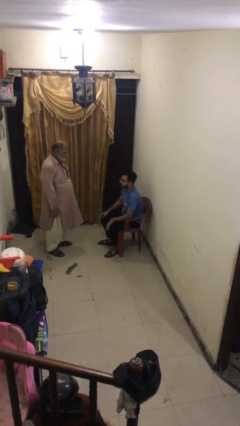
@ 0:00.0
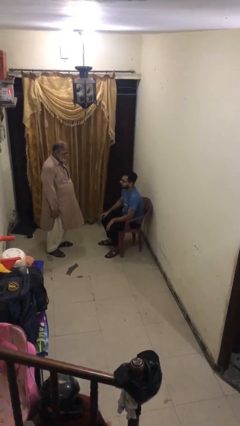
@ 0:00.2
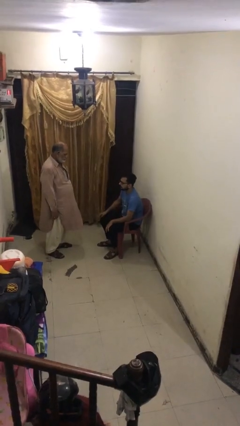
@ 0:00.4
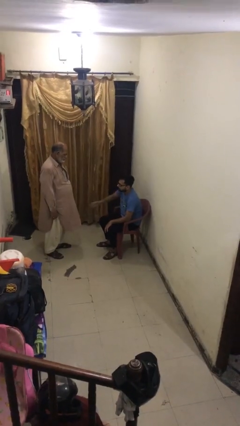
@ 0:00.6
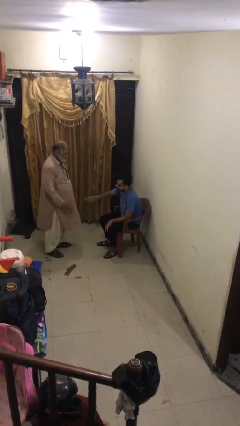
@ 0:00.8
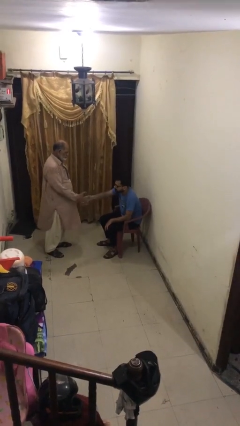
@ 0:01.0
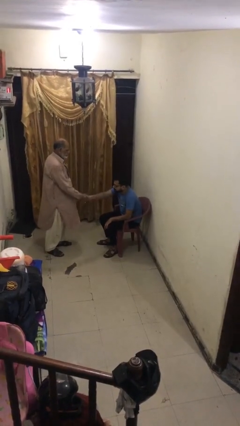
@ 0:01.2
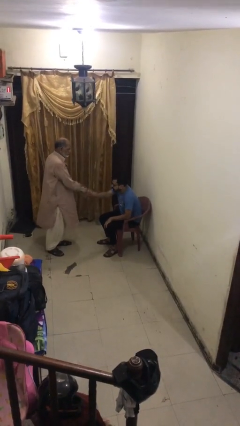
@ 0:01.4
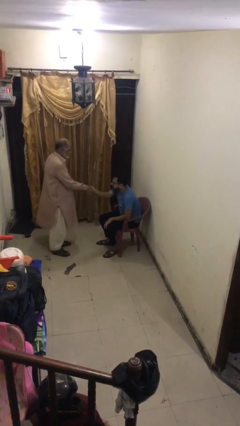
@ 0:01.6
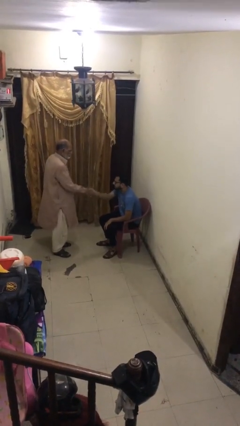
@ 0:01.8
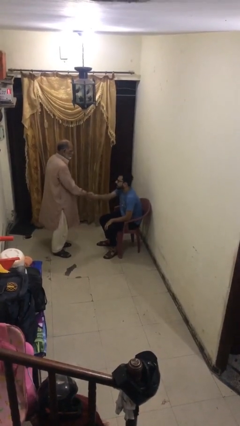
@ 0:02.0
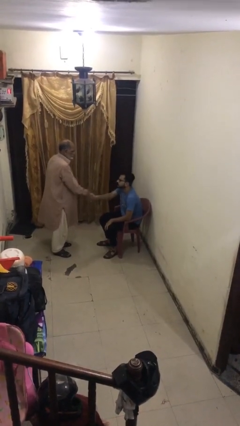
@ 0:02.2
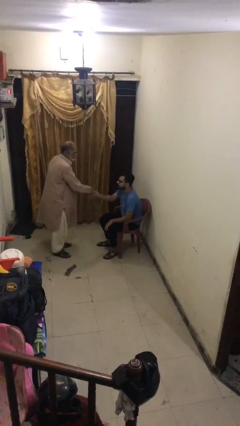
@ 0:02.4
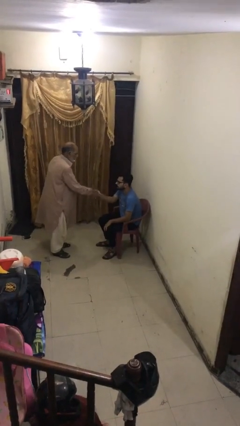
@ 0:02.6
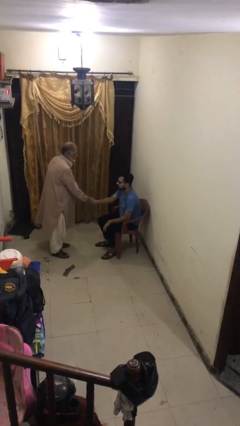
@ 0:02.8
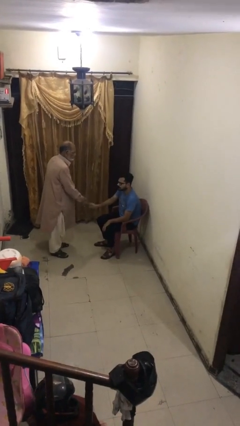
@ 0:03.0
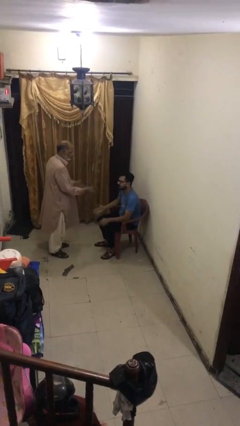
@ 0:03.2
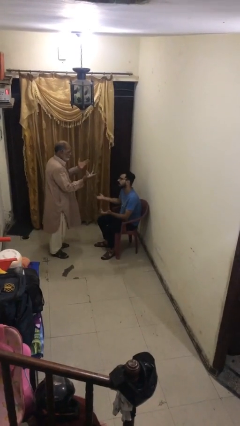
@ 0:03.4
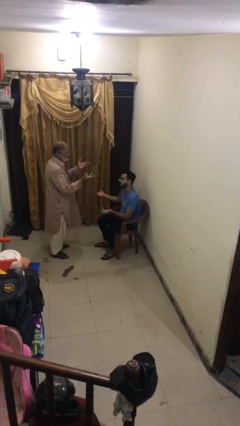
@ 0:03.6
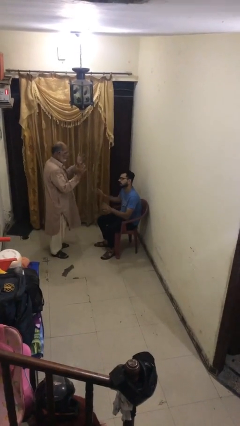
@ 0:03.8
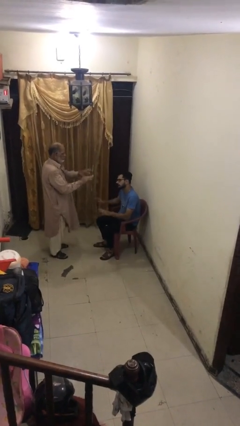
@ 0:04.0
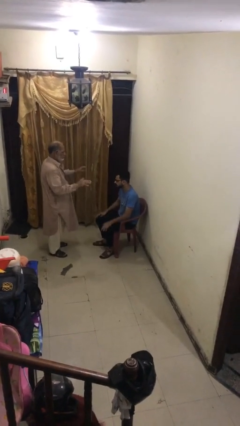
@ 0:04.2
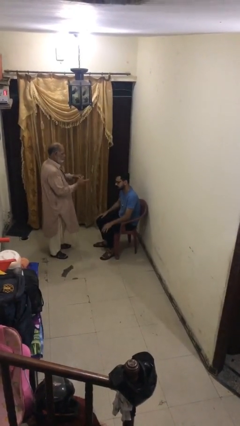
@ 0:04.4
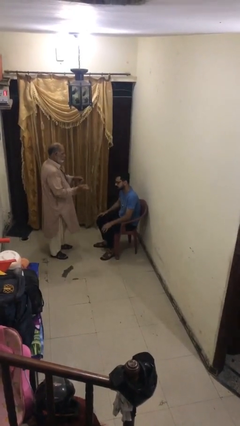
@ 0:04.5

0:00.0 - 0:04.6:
person shakes hand

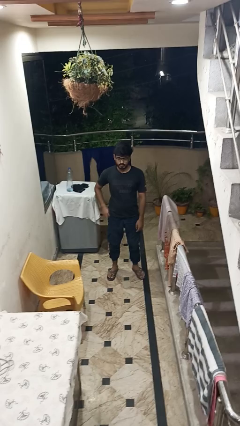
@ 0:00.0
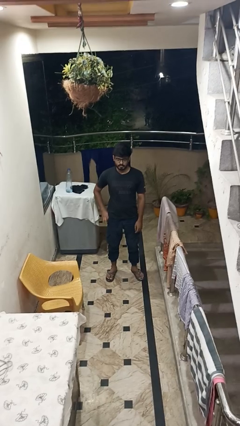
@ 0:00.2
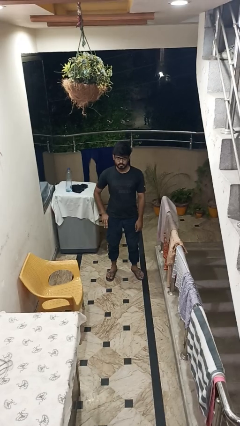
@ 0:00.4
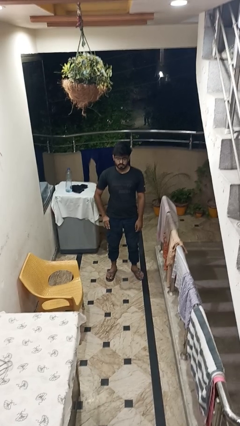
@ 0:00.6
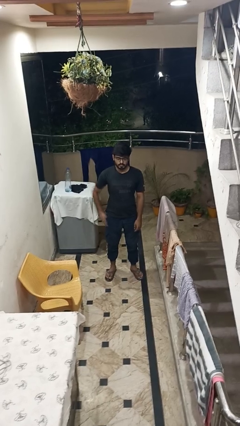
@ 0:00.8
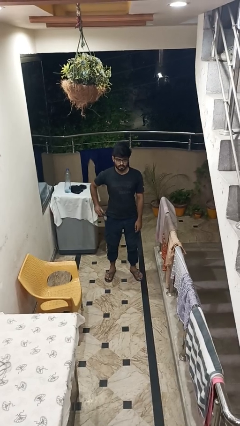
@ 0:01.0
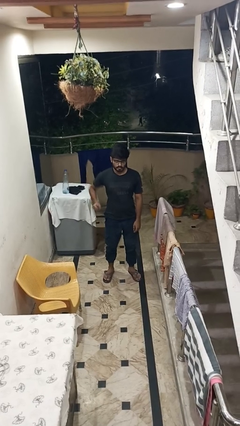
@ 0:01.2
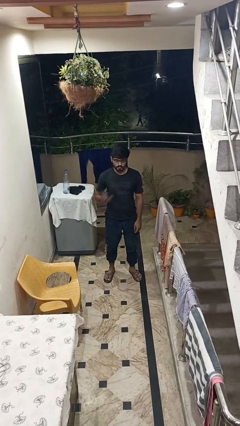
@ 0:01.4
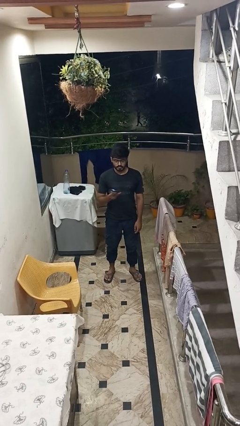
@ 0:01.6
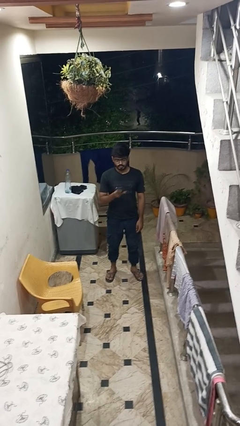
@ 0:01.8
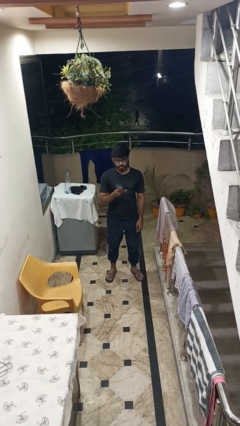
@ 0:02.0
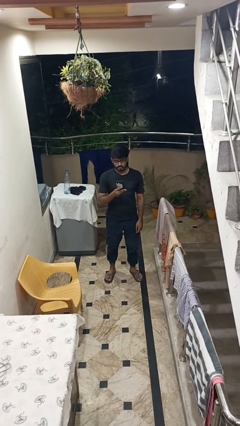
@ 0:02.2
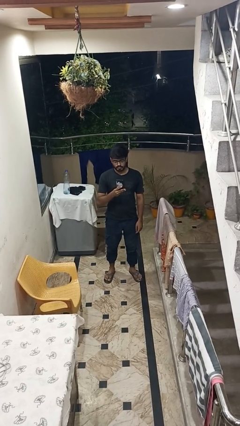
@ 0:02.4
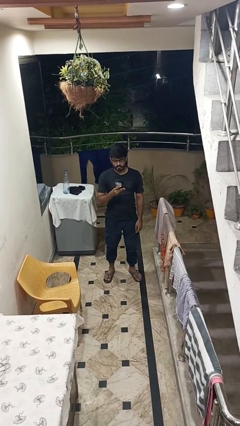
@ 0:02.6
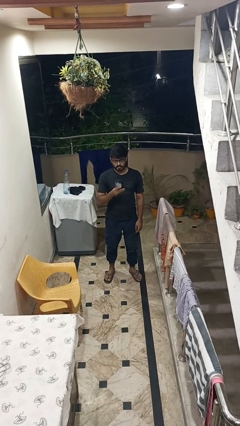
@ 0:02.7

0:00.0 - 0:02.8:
person takes phone from pocket

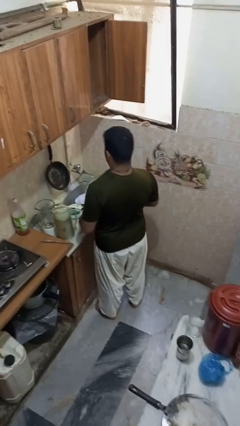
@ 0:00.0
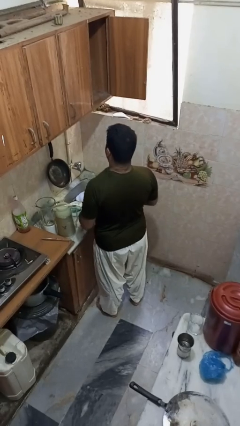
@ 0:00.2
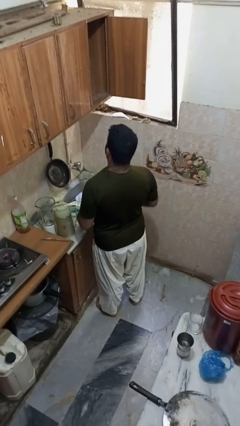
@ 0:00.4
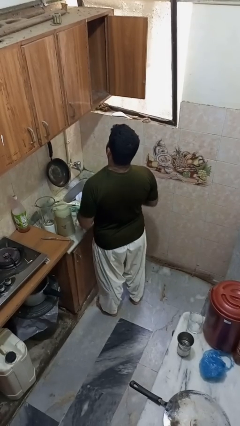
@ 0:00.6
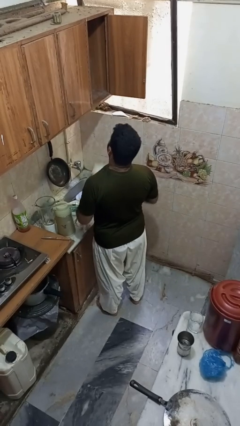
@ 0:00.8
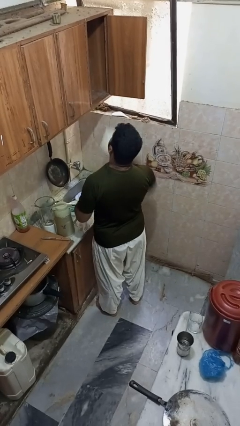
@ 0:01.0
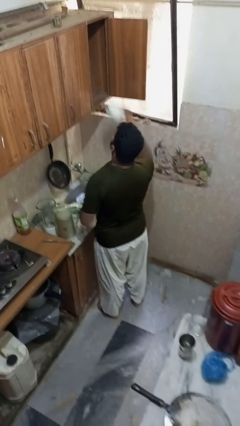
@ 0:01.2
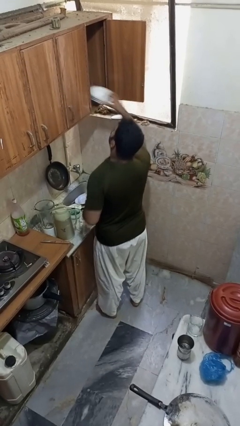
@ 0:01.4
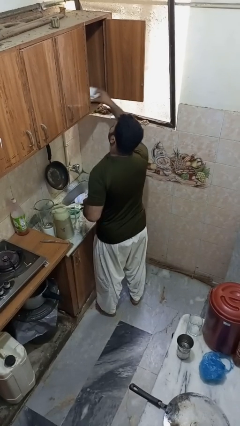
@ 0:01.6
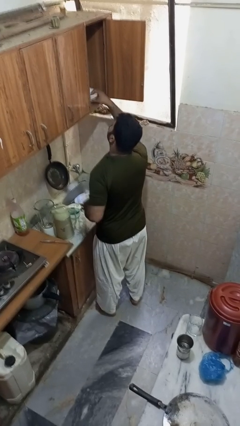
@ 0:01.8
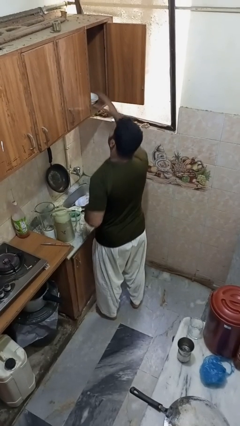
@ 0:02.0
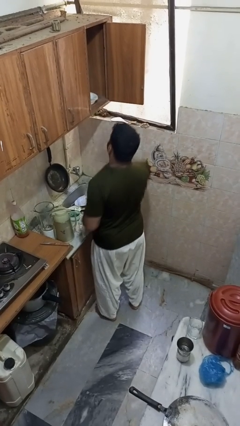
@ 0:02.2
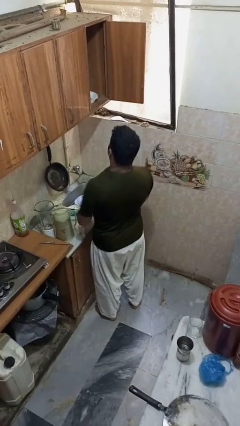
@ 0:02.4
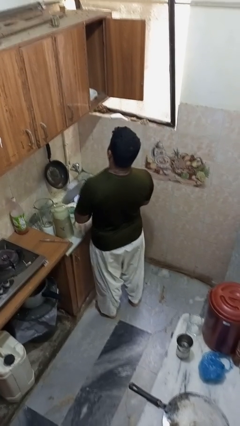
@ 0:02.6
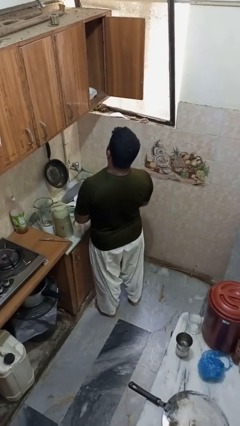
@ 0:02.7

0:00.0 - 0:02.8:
person puts object in cabinet

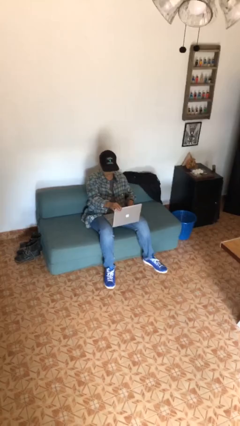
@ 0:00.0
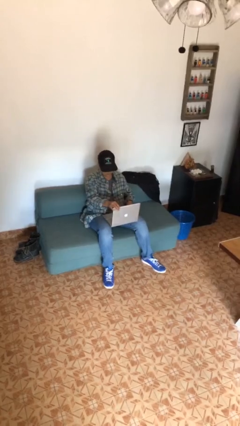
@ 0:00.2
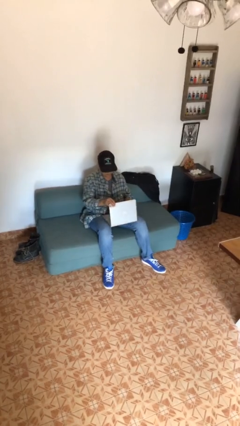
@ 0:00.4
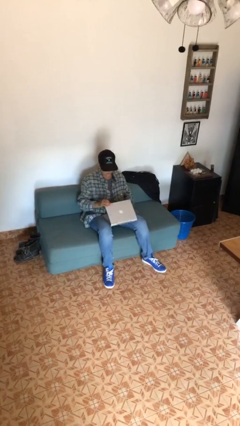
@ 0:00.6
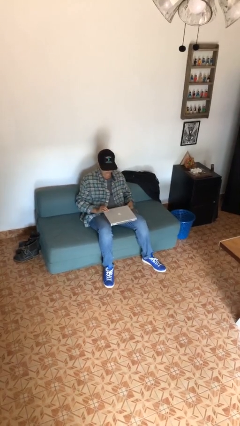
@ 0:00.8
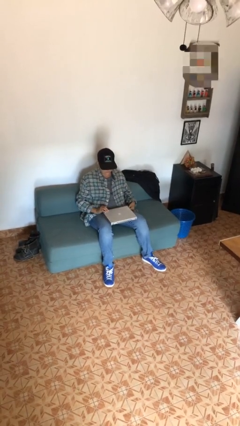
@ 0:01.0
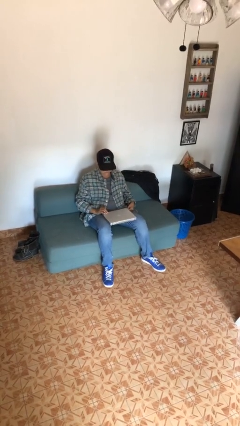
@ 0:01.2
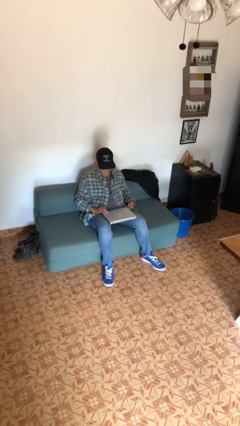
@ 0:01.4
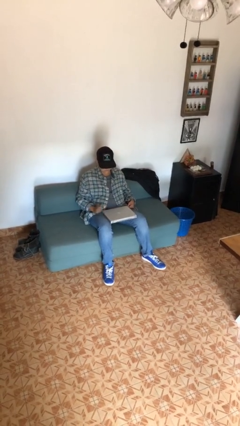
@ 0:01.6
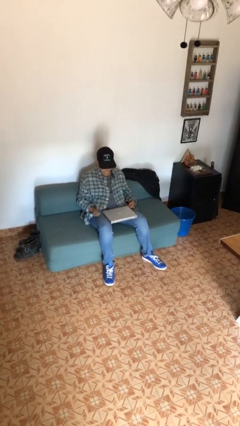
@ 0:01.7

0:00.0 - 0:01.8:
person closes laptop

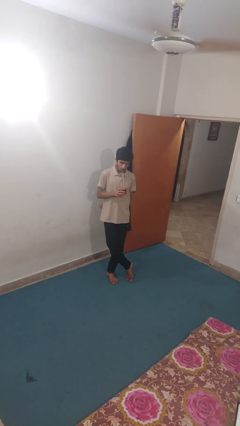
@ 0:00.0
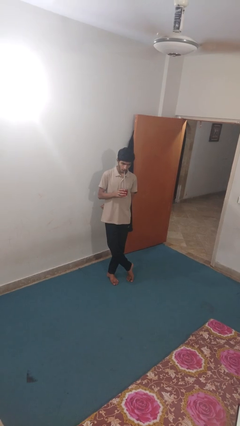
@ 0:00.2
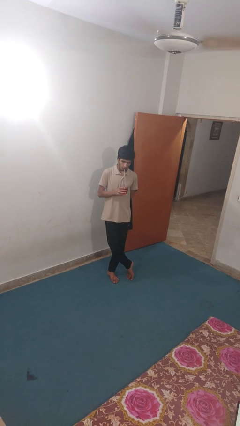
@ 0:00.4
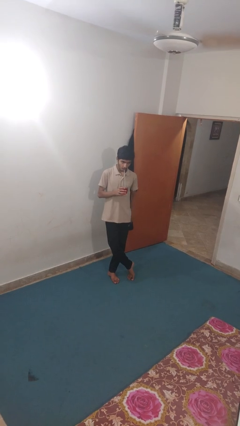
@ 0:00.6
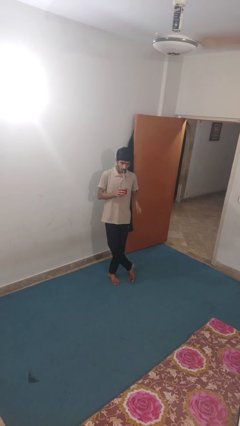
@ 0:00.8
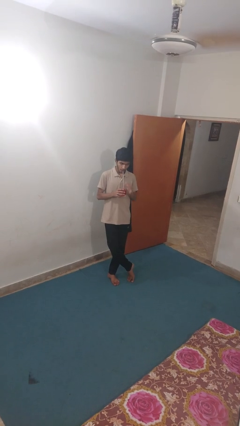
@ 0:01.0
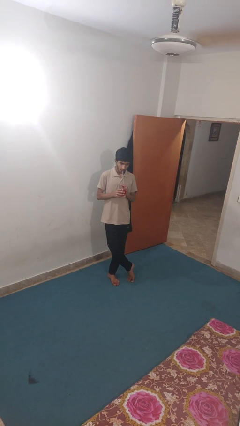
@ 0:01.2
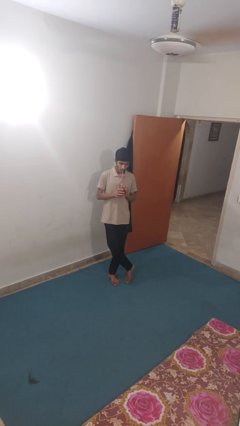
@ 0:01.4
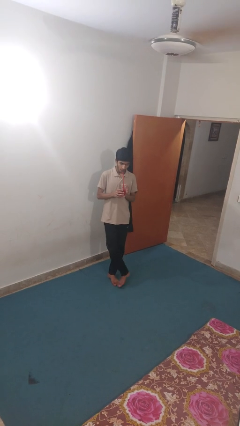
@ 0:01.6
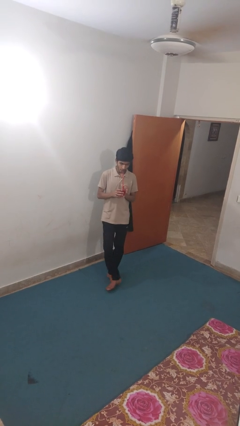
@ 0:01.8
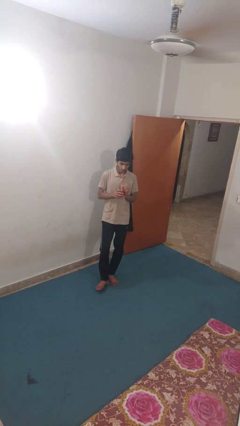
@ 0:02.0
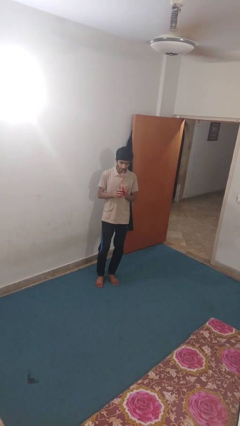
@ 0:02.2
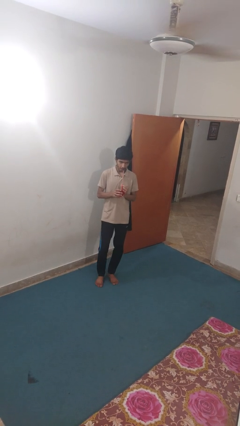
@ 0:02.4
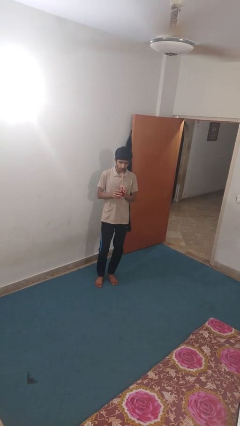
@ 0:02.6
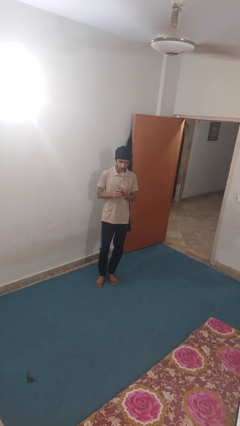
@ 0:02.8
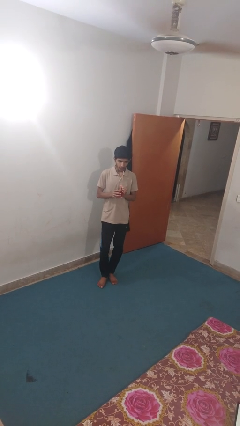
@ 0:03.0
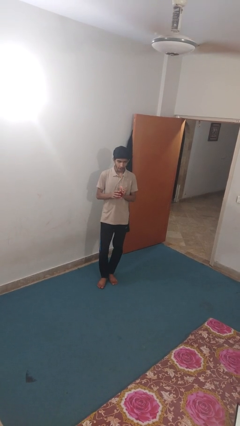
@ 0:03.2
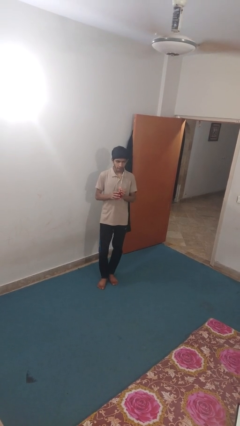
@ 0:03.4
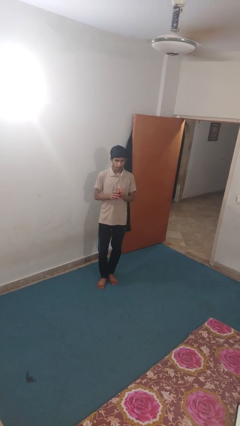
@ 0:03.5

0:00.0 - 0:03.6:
person drinks from straw

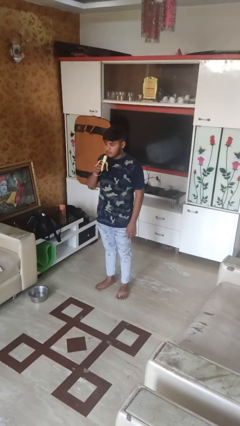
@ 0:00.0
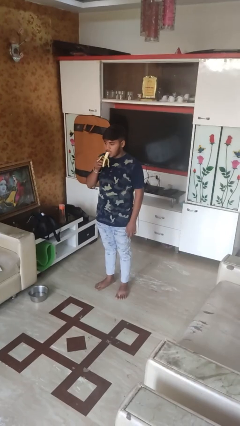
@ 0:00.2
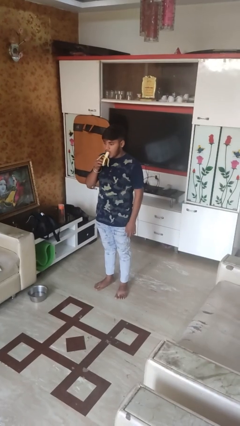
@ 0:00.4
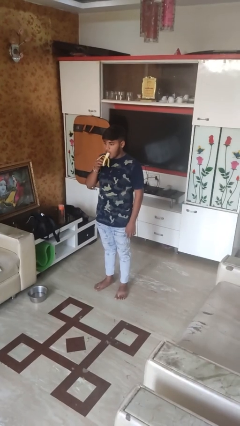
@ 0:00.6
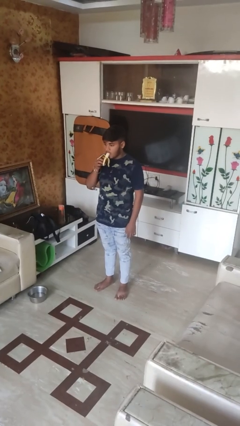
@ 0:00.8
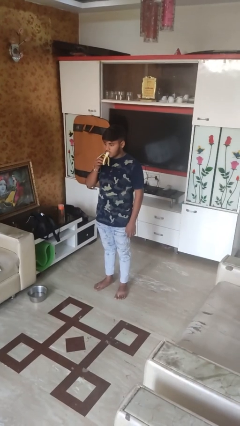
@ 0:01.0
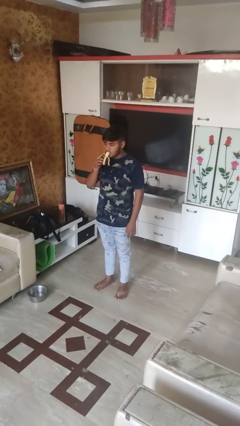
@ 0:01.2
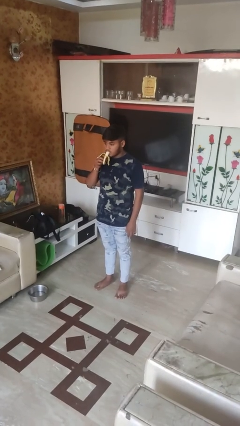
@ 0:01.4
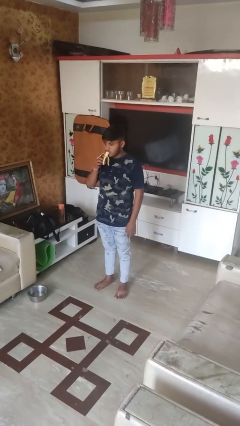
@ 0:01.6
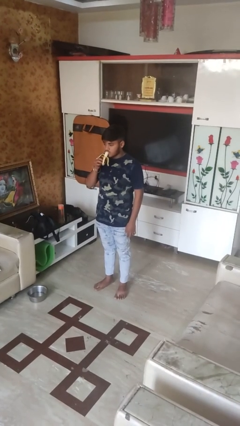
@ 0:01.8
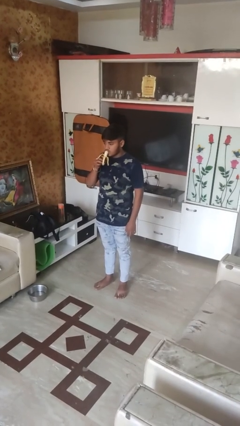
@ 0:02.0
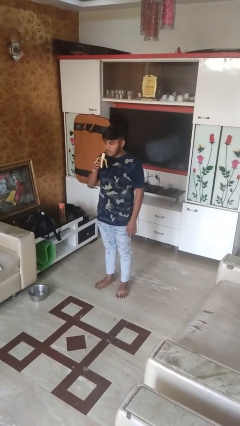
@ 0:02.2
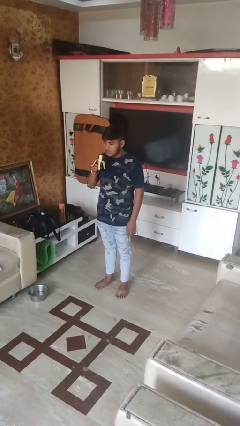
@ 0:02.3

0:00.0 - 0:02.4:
person eats banana
